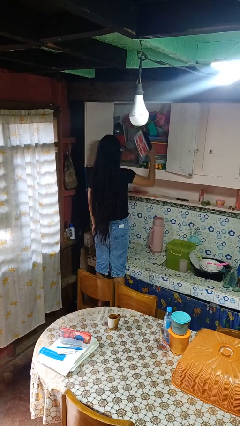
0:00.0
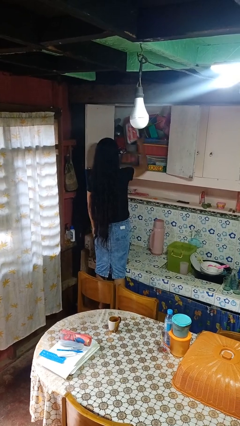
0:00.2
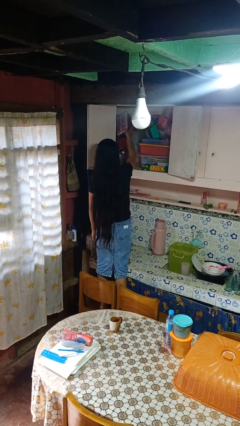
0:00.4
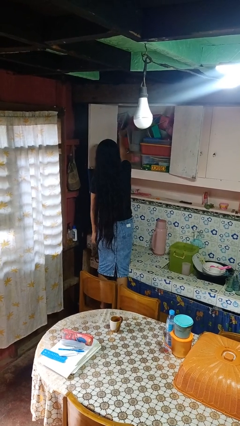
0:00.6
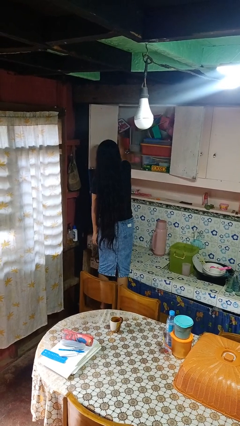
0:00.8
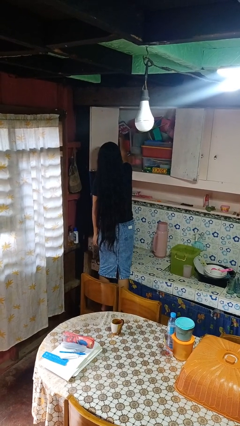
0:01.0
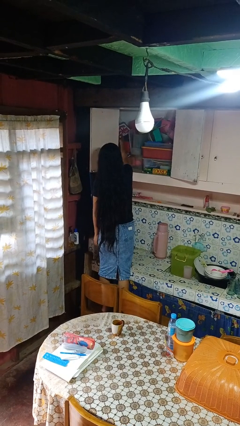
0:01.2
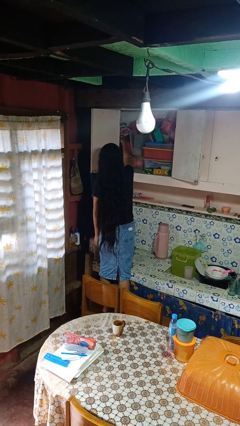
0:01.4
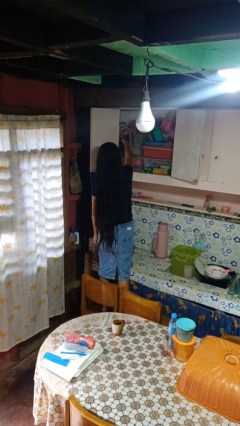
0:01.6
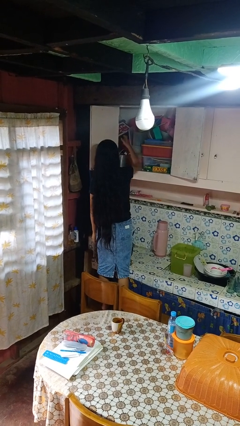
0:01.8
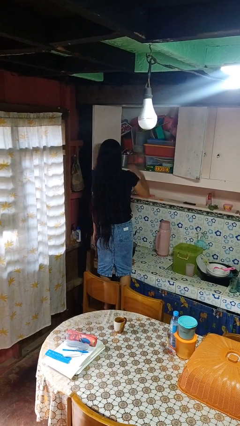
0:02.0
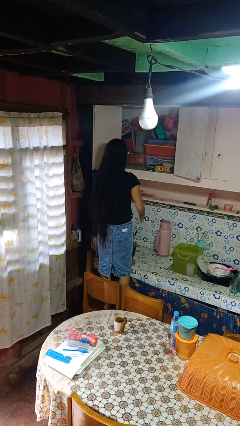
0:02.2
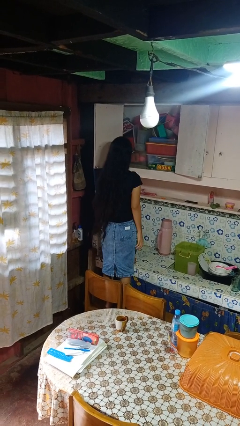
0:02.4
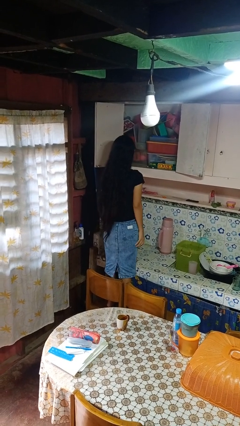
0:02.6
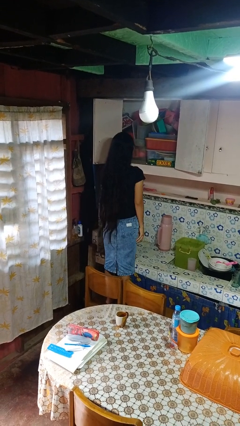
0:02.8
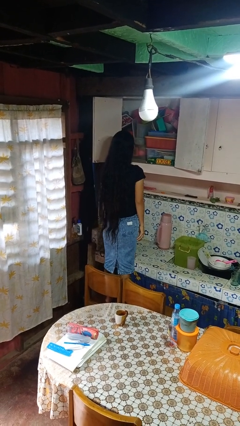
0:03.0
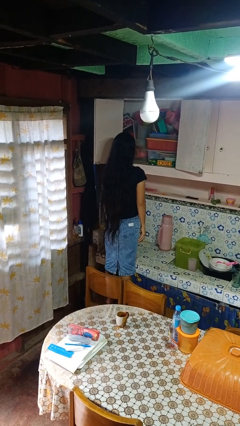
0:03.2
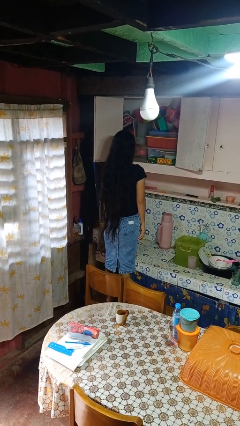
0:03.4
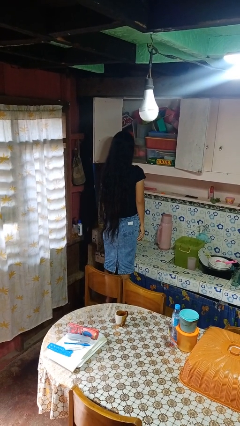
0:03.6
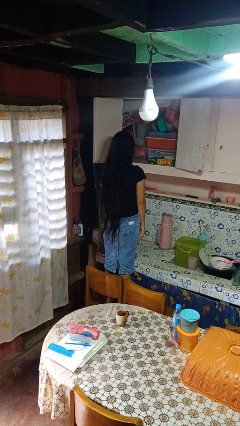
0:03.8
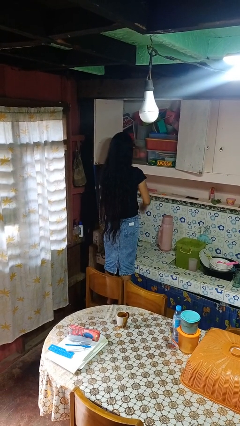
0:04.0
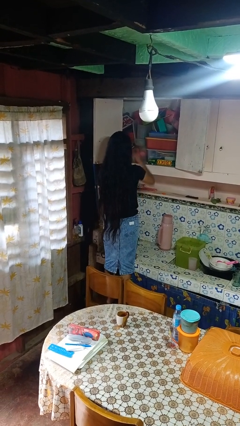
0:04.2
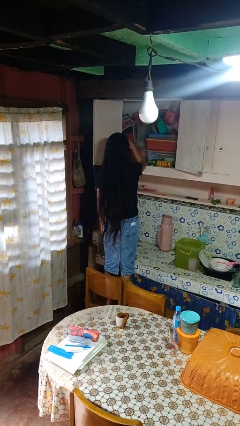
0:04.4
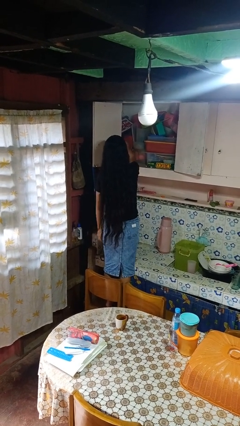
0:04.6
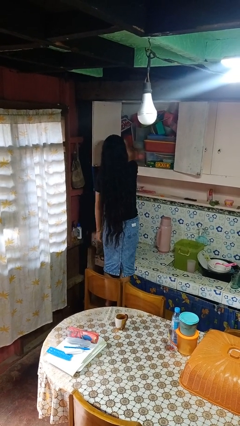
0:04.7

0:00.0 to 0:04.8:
person puts object in cabinet

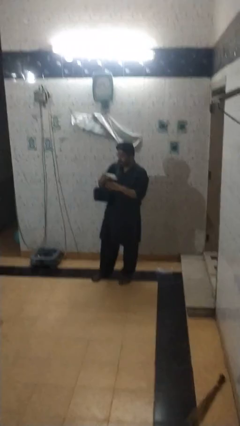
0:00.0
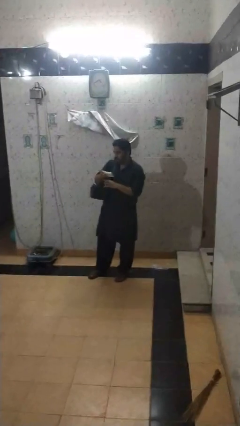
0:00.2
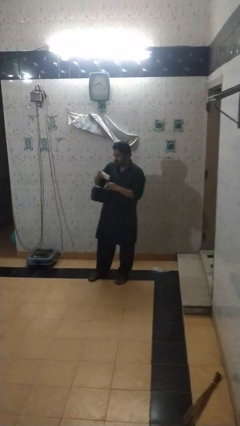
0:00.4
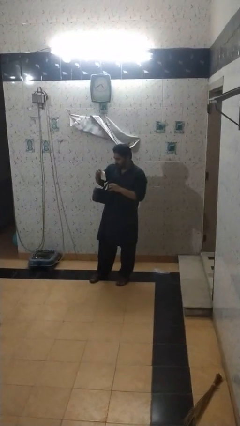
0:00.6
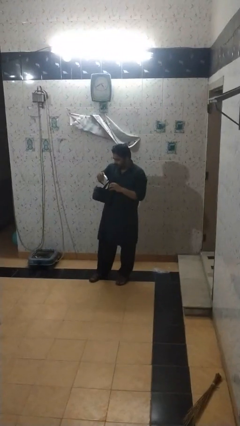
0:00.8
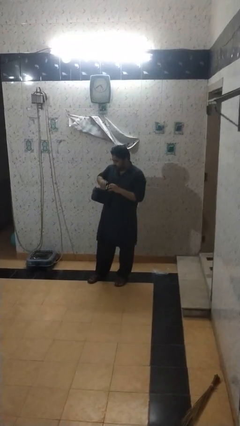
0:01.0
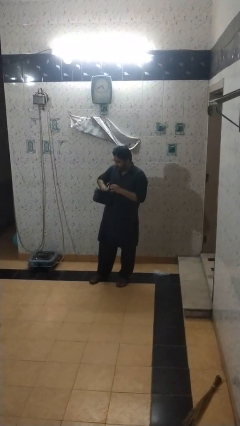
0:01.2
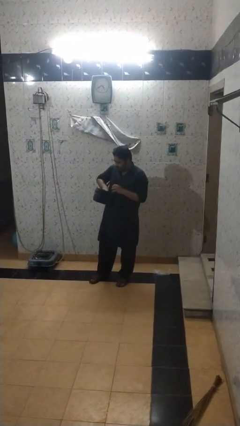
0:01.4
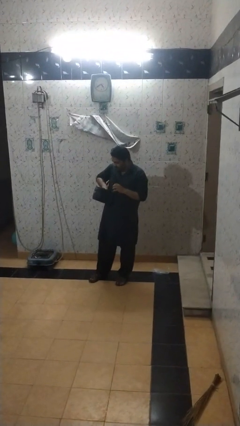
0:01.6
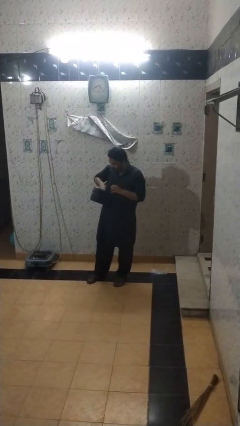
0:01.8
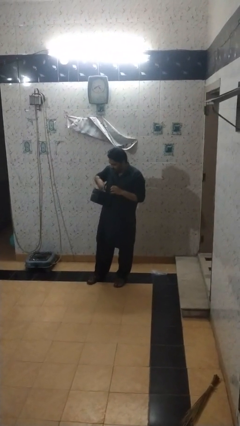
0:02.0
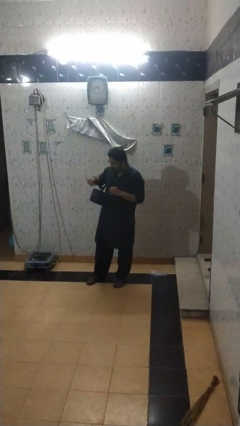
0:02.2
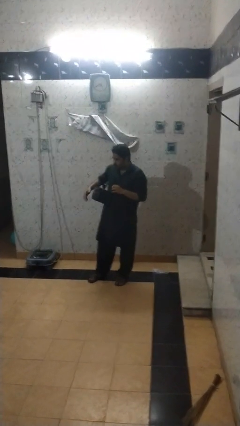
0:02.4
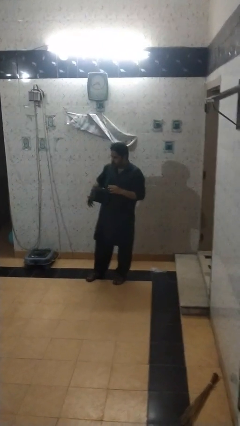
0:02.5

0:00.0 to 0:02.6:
person puts object into backpack

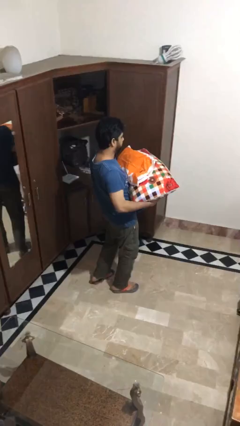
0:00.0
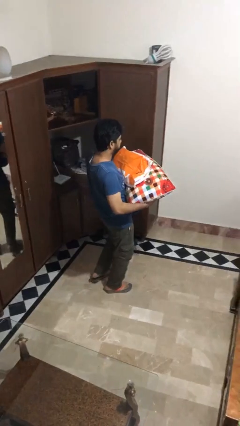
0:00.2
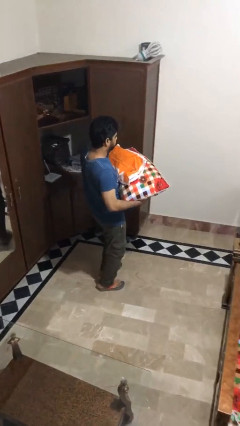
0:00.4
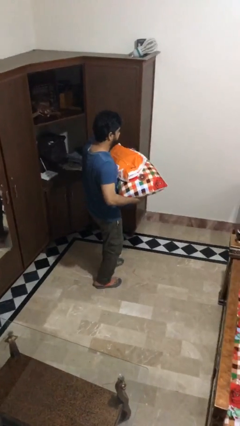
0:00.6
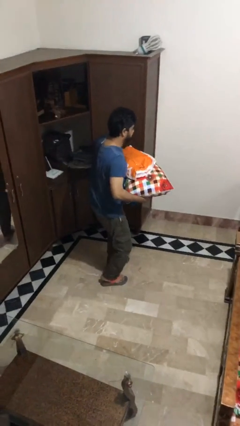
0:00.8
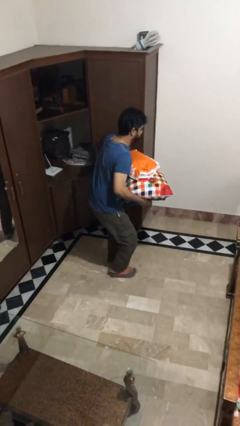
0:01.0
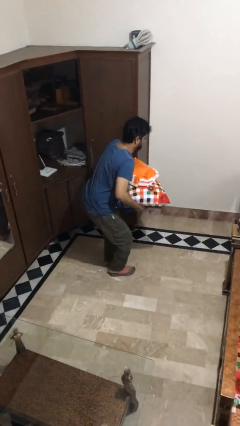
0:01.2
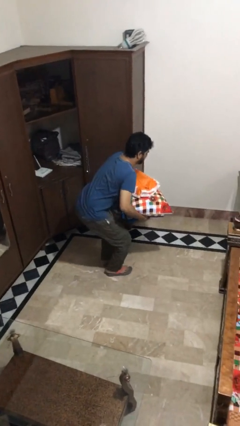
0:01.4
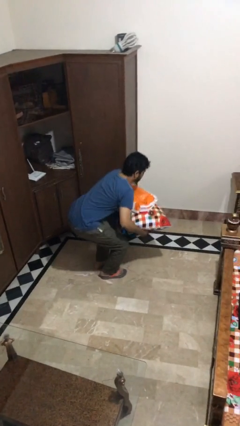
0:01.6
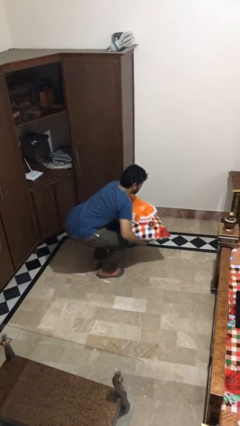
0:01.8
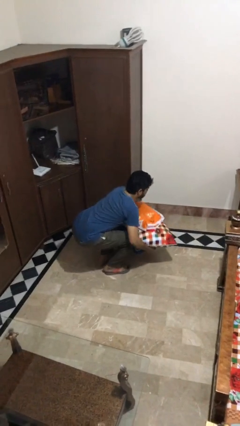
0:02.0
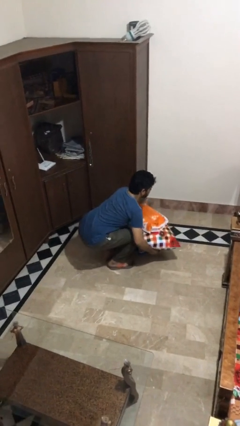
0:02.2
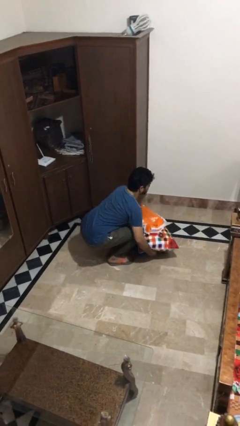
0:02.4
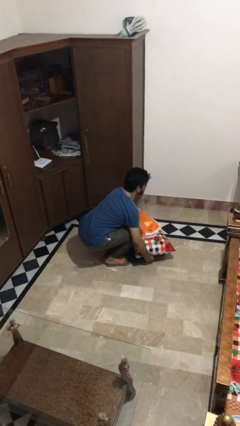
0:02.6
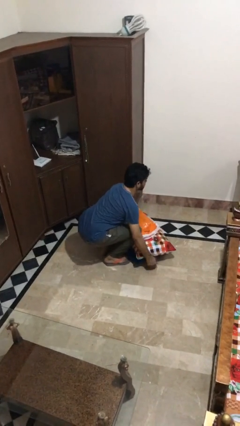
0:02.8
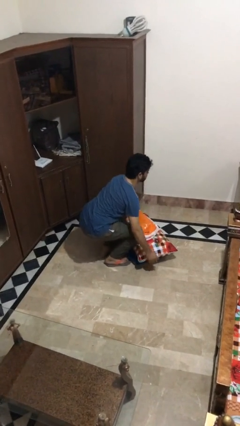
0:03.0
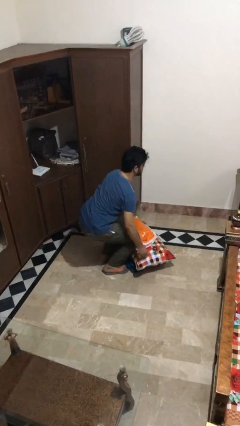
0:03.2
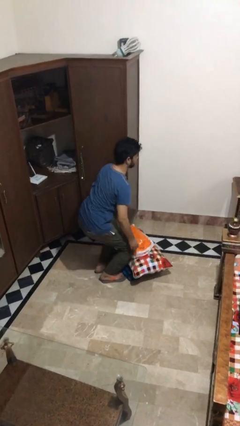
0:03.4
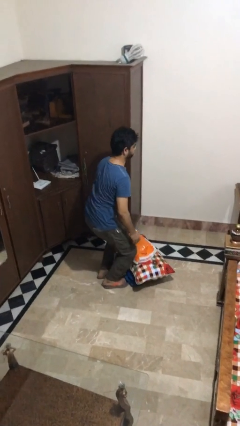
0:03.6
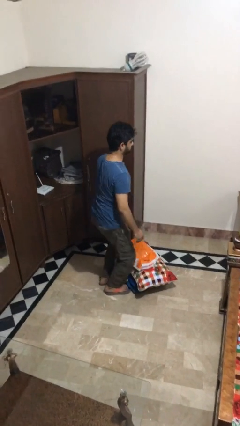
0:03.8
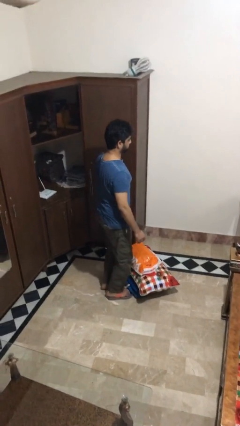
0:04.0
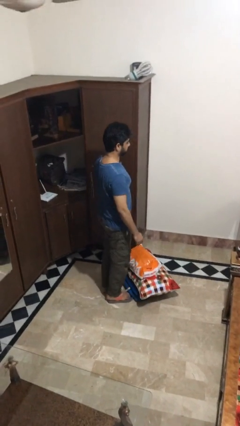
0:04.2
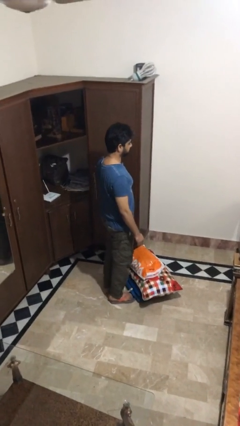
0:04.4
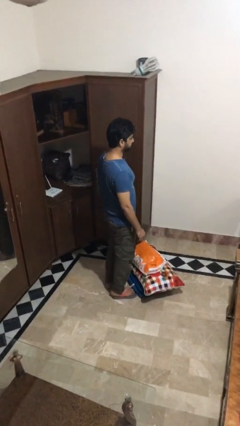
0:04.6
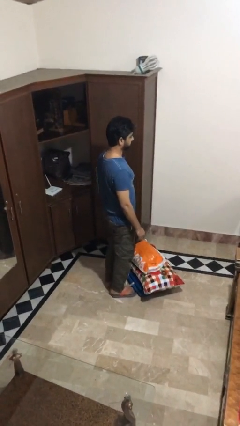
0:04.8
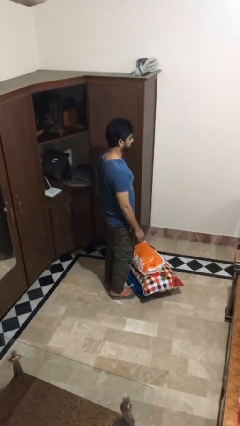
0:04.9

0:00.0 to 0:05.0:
person puts down object on floor

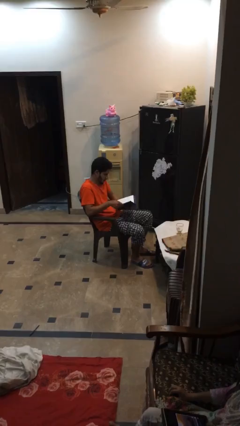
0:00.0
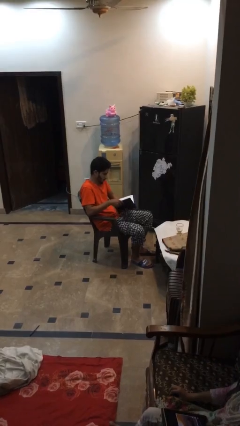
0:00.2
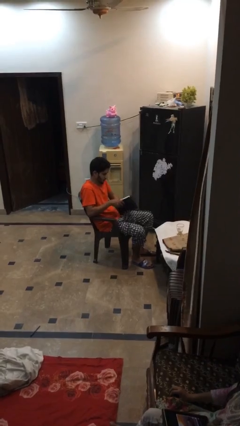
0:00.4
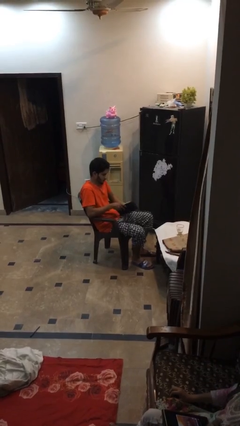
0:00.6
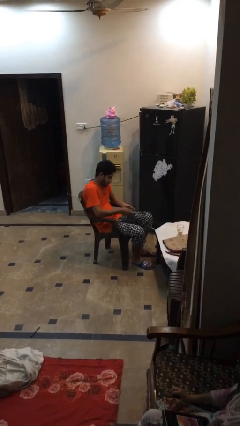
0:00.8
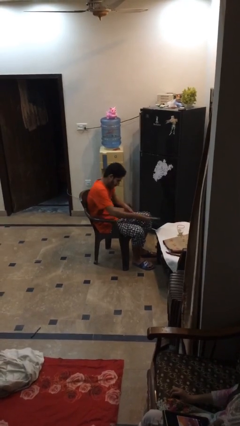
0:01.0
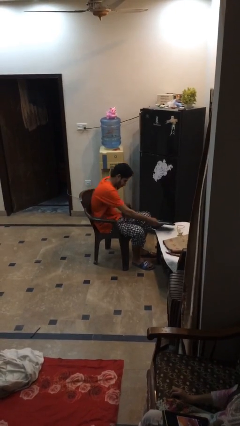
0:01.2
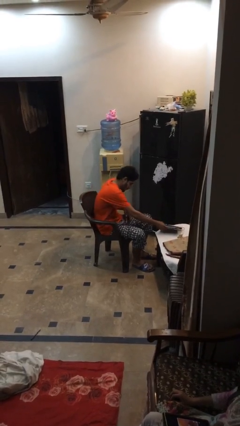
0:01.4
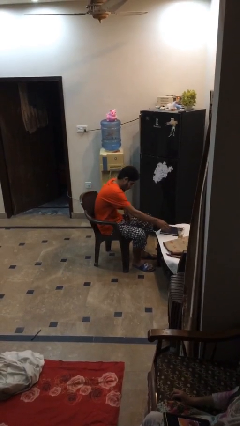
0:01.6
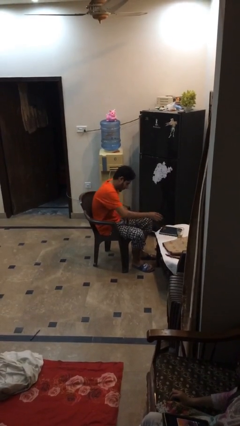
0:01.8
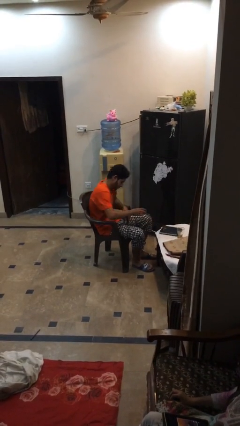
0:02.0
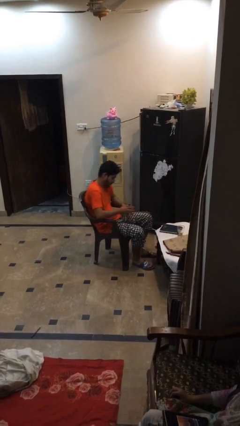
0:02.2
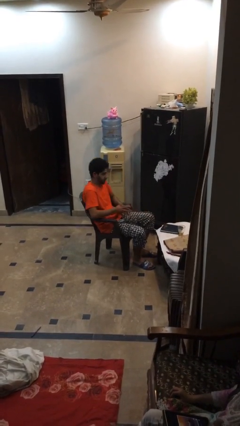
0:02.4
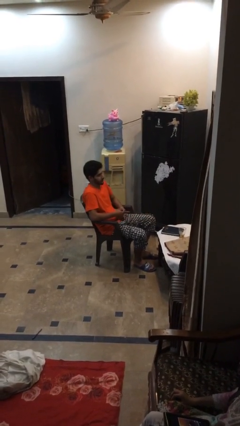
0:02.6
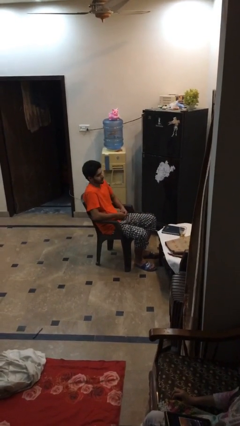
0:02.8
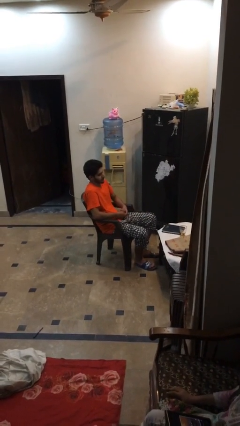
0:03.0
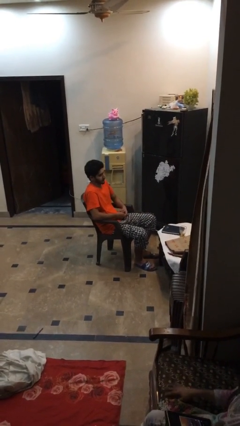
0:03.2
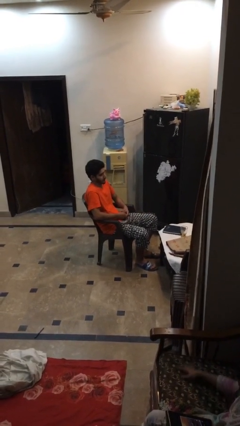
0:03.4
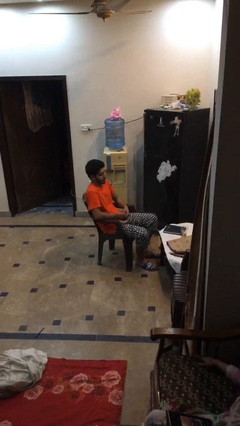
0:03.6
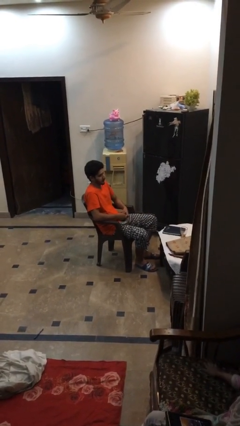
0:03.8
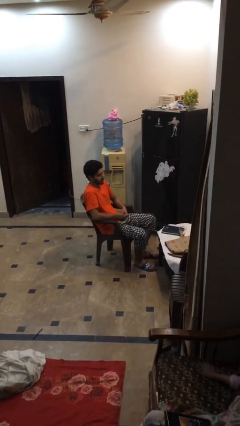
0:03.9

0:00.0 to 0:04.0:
person puts down object on table

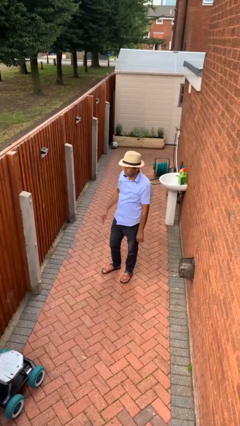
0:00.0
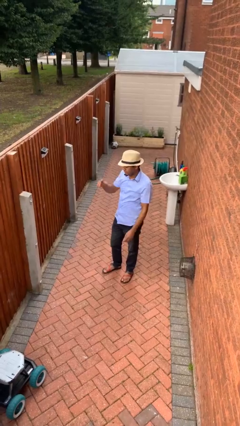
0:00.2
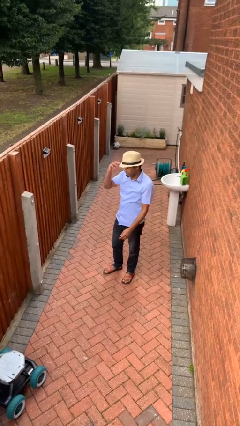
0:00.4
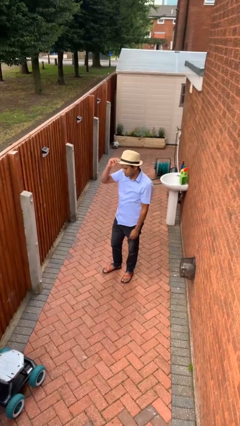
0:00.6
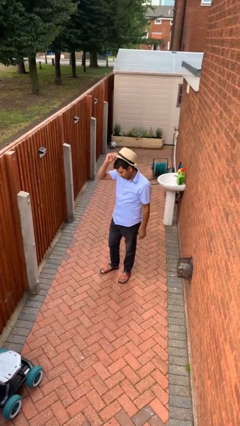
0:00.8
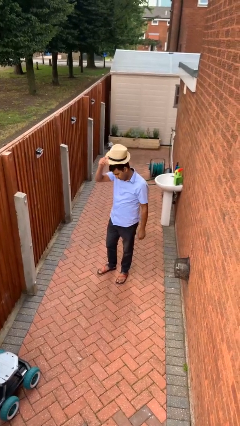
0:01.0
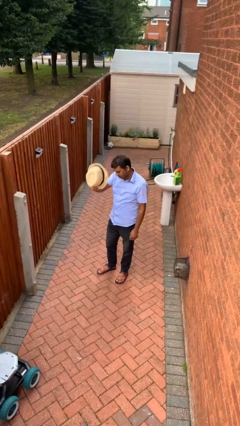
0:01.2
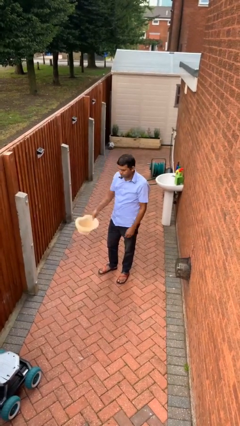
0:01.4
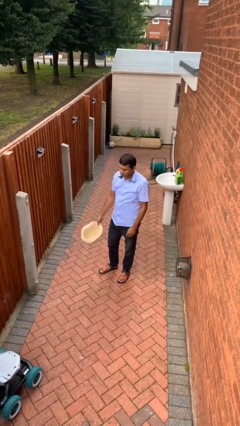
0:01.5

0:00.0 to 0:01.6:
person takes off hat
